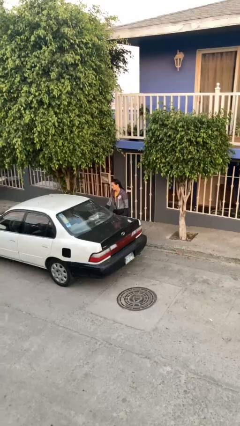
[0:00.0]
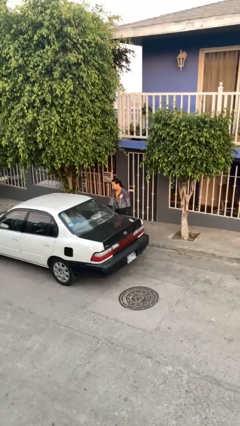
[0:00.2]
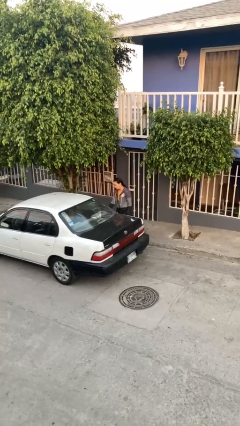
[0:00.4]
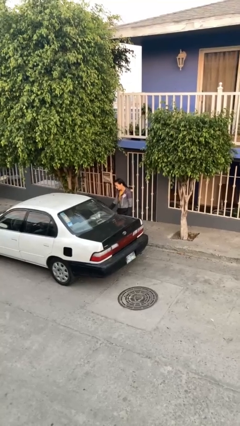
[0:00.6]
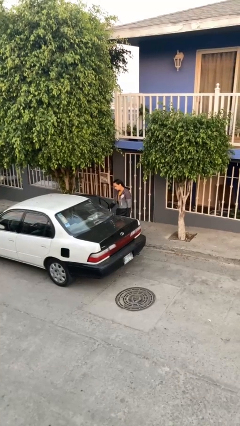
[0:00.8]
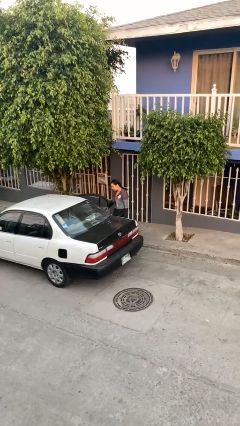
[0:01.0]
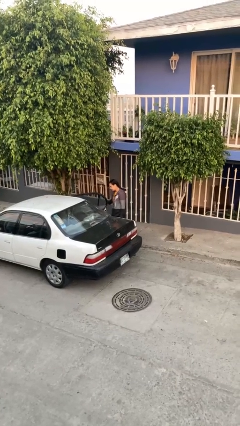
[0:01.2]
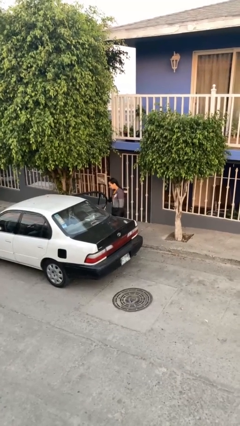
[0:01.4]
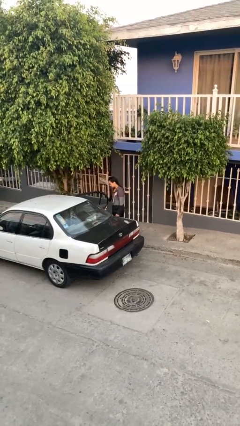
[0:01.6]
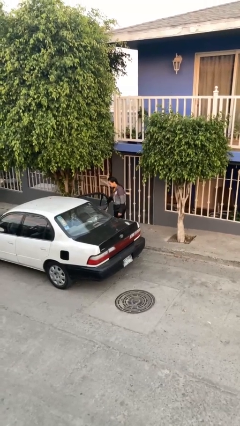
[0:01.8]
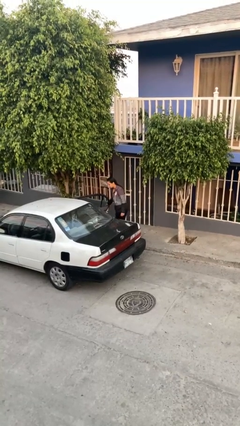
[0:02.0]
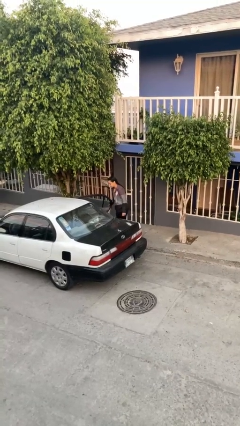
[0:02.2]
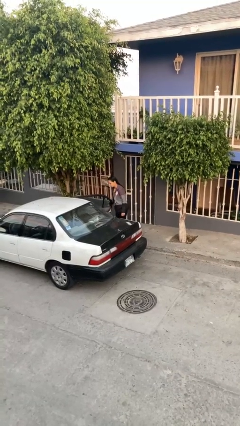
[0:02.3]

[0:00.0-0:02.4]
person opens car door

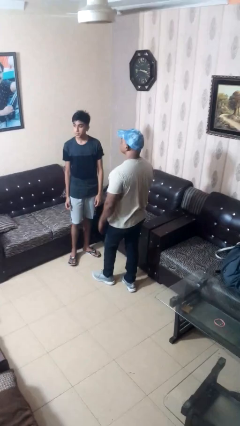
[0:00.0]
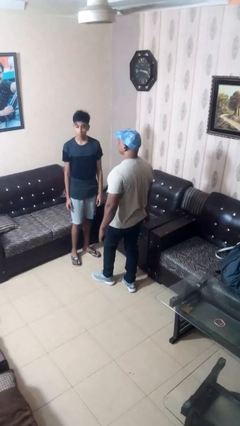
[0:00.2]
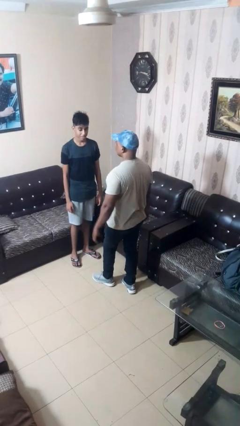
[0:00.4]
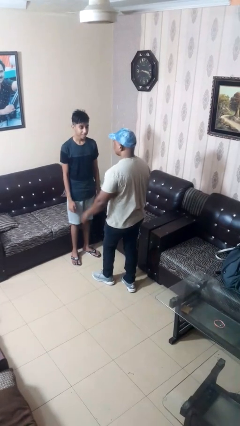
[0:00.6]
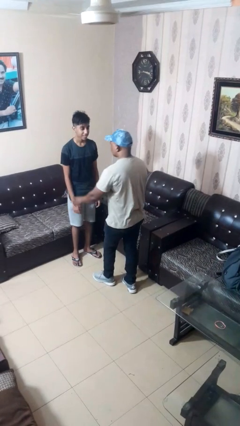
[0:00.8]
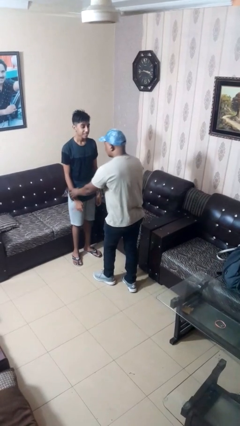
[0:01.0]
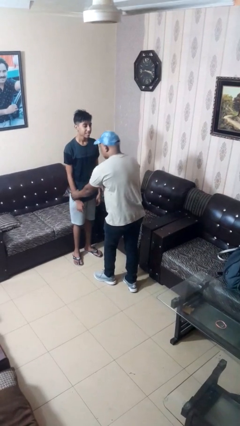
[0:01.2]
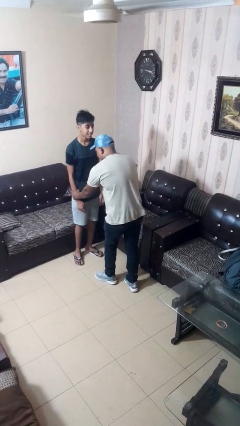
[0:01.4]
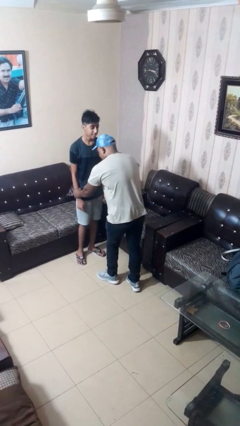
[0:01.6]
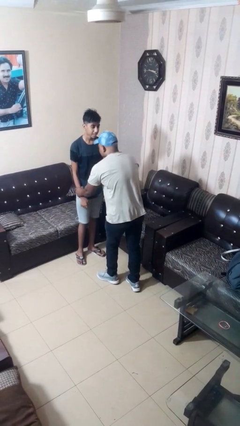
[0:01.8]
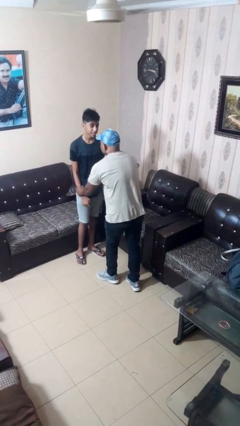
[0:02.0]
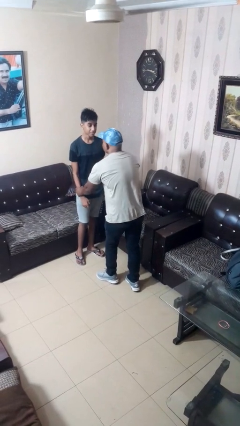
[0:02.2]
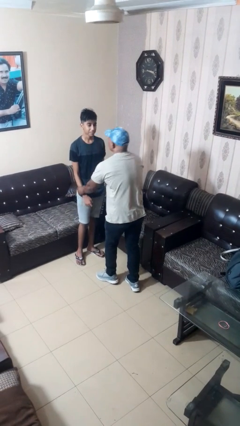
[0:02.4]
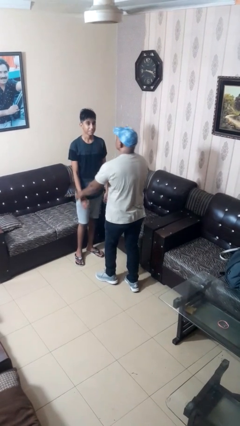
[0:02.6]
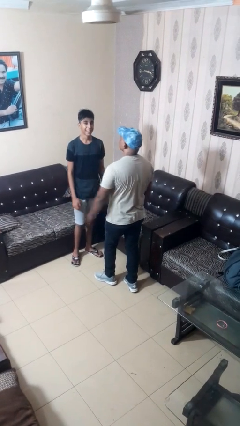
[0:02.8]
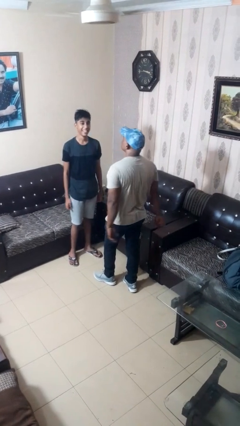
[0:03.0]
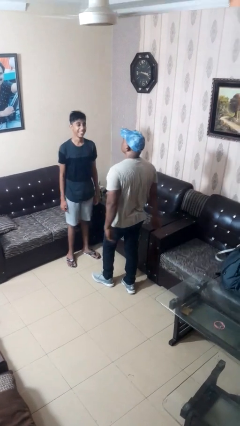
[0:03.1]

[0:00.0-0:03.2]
person grabs person by forearm

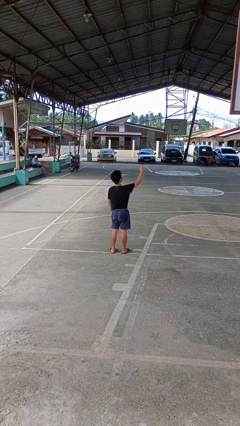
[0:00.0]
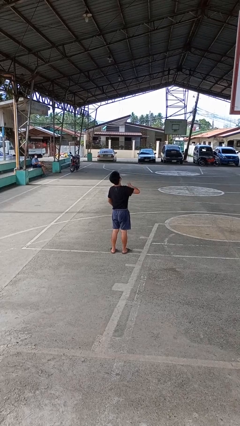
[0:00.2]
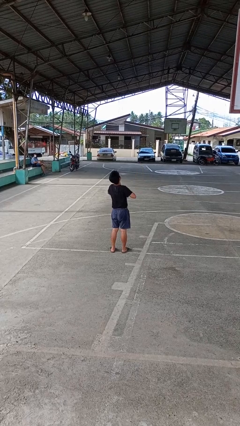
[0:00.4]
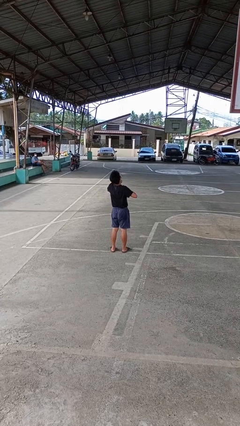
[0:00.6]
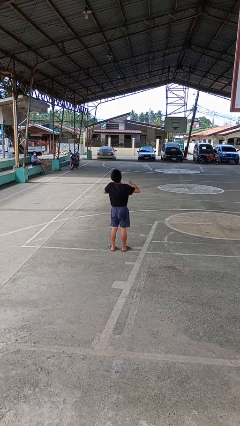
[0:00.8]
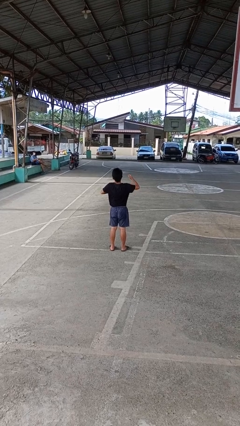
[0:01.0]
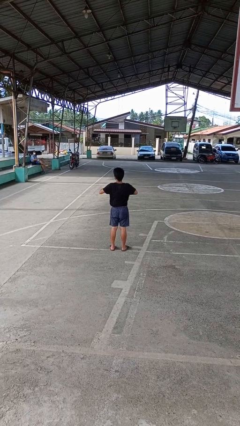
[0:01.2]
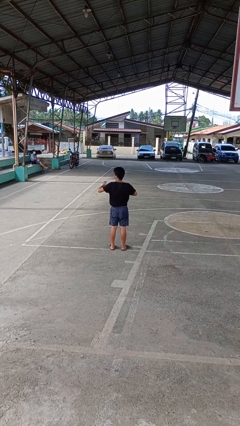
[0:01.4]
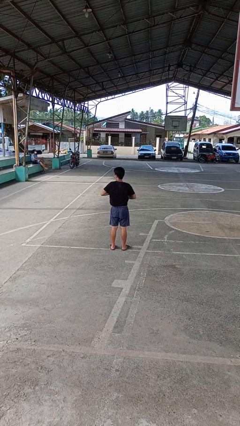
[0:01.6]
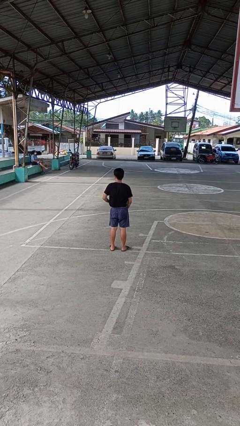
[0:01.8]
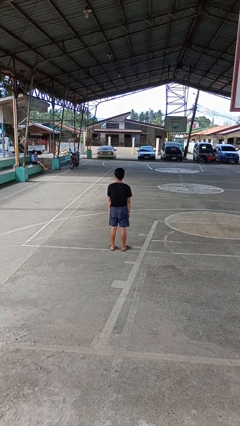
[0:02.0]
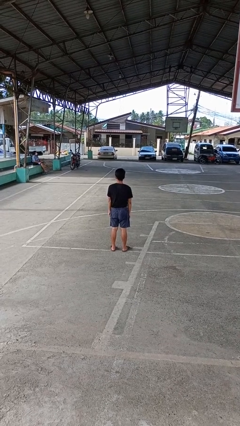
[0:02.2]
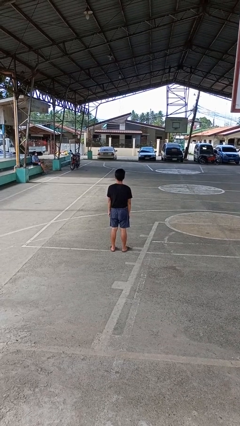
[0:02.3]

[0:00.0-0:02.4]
person drums on chest

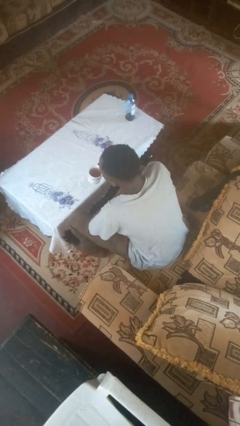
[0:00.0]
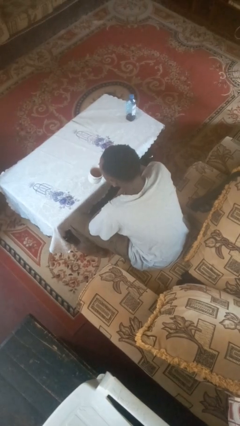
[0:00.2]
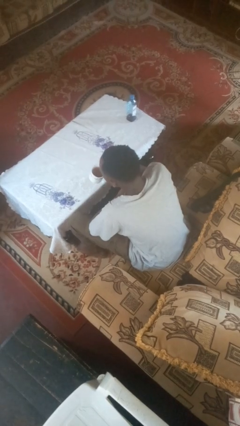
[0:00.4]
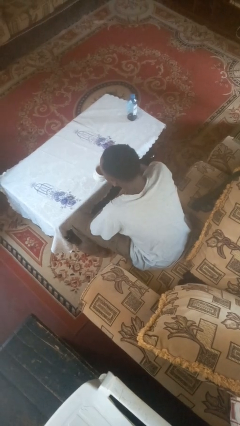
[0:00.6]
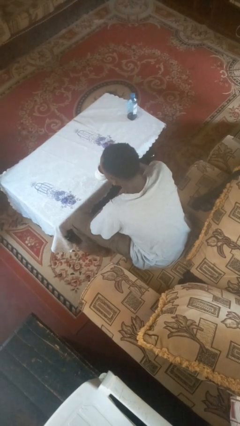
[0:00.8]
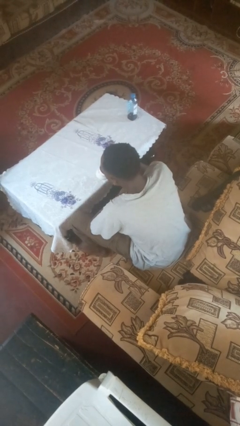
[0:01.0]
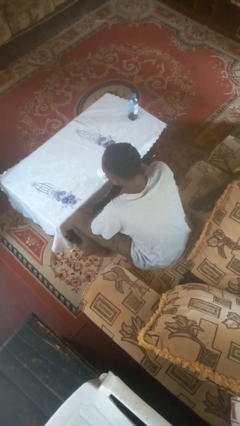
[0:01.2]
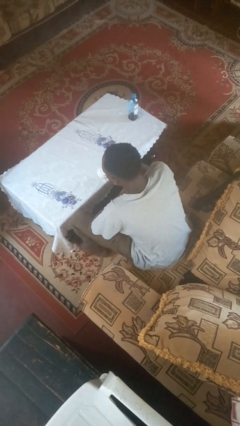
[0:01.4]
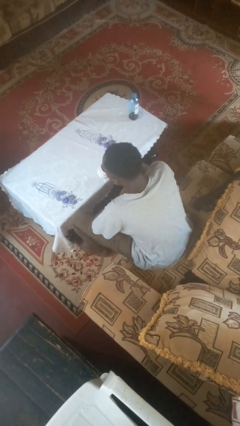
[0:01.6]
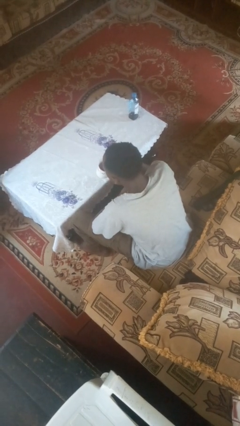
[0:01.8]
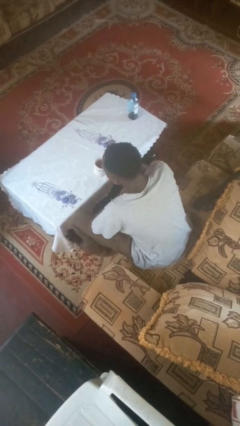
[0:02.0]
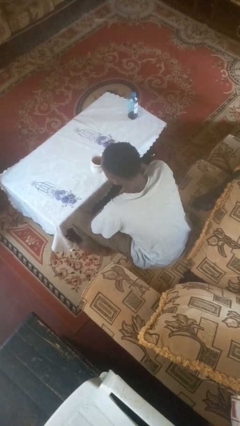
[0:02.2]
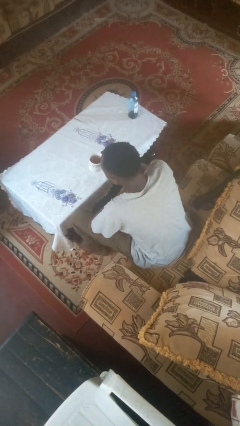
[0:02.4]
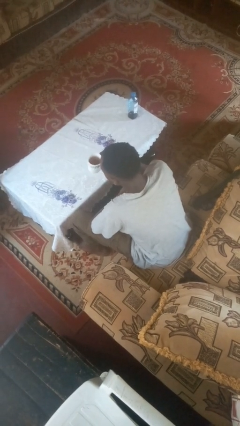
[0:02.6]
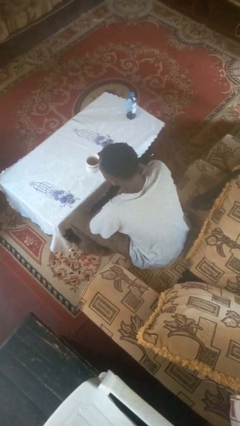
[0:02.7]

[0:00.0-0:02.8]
person drinks from mug

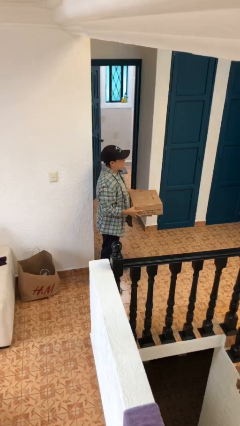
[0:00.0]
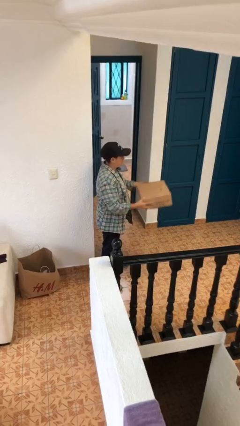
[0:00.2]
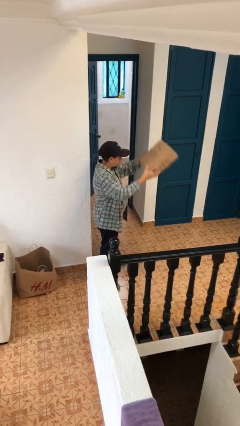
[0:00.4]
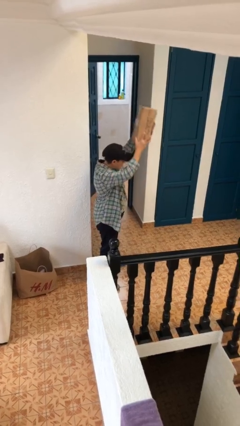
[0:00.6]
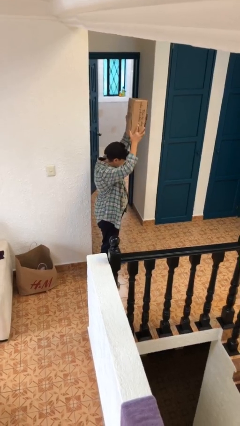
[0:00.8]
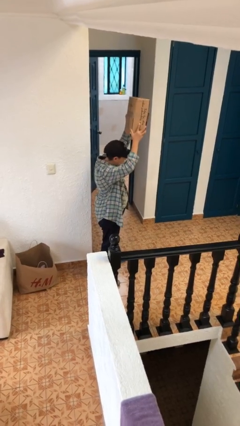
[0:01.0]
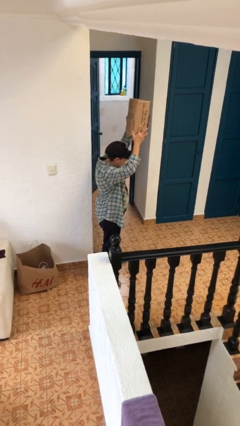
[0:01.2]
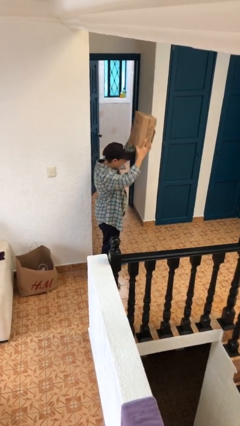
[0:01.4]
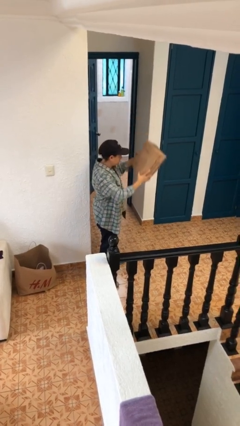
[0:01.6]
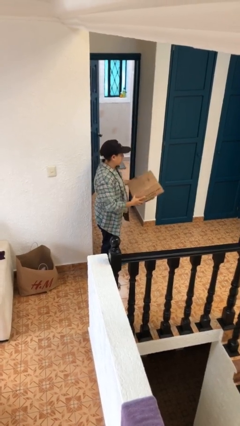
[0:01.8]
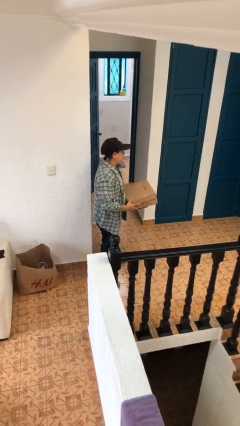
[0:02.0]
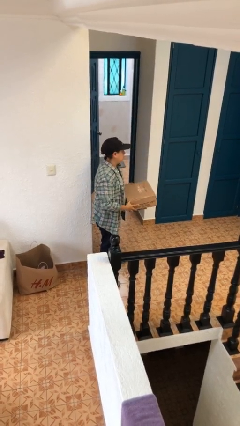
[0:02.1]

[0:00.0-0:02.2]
person holds object above head

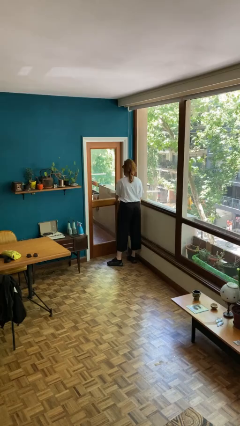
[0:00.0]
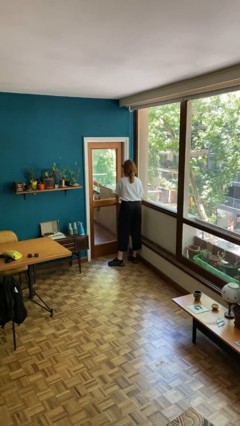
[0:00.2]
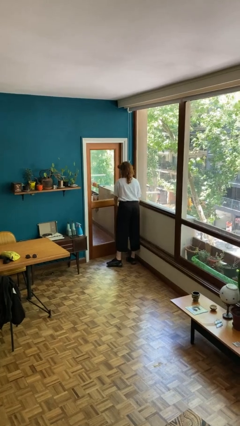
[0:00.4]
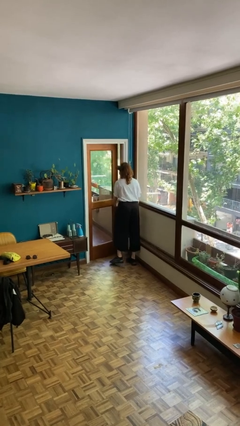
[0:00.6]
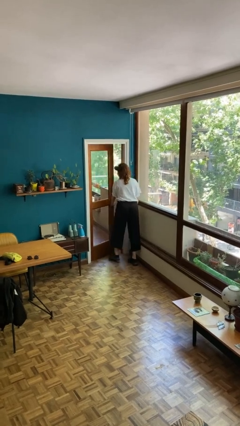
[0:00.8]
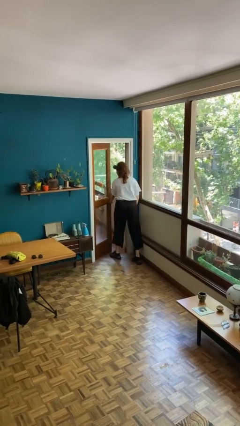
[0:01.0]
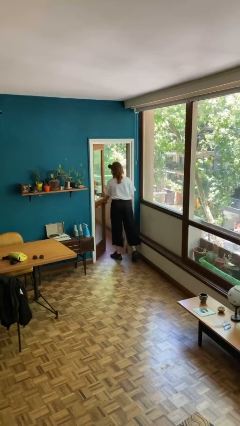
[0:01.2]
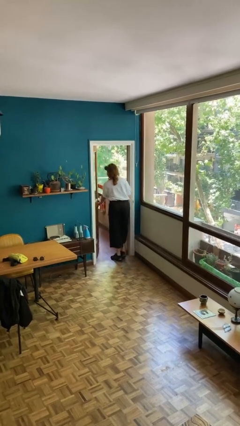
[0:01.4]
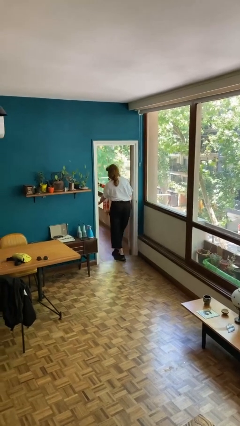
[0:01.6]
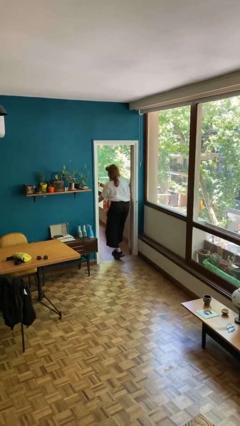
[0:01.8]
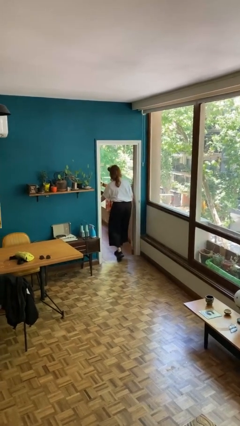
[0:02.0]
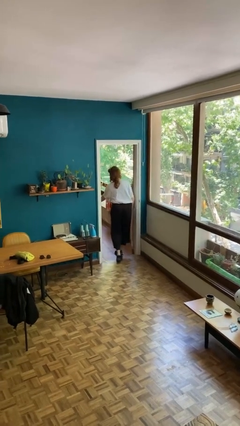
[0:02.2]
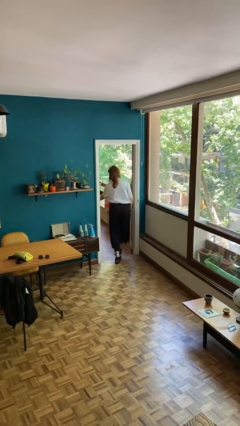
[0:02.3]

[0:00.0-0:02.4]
person opens facility door

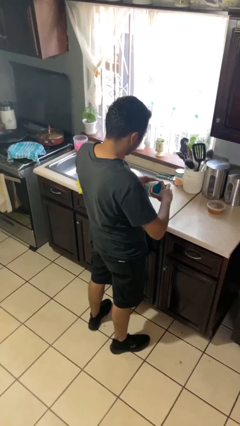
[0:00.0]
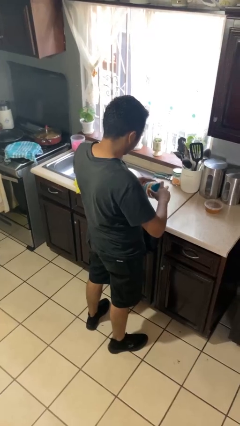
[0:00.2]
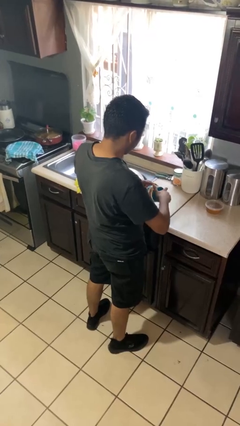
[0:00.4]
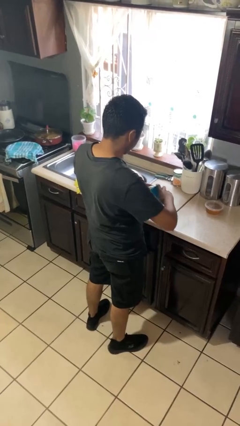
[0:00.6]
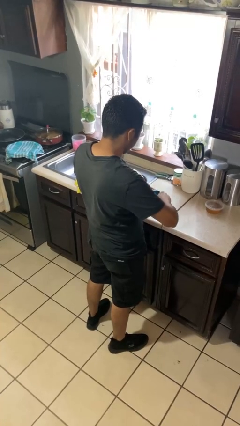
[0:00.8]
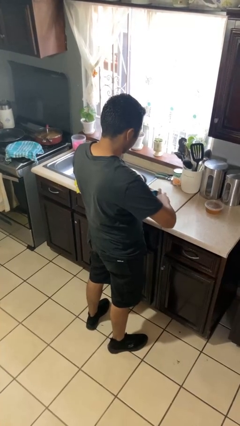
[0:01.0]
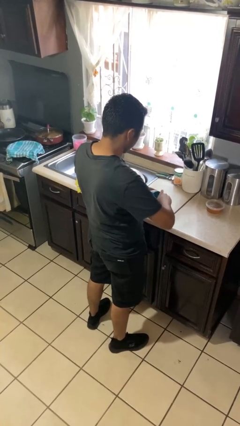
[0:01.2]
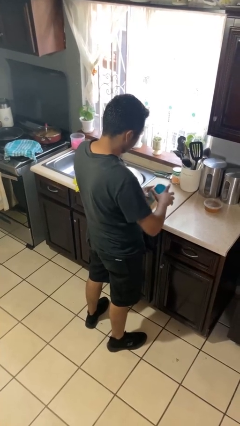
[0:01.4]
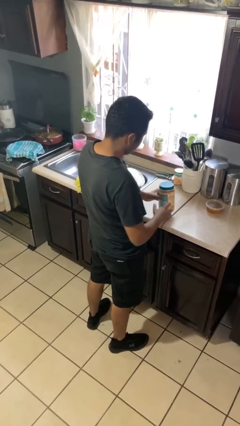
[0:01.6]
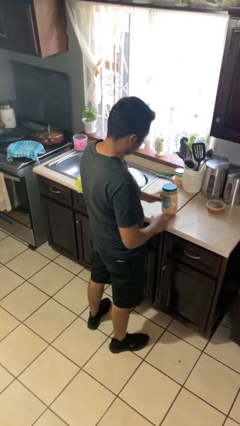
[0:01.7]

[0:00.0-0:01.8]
person closes jar

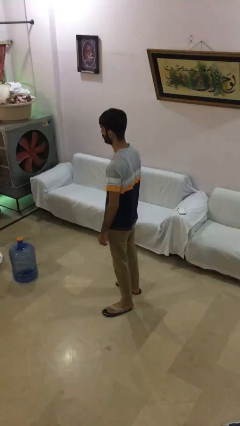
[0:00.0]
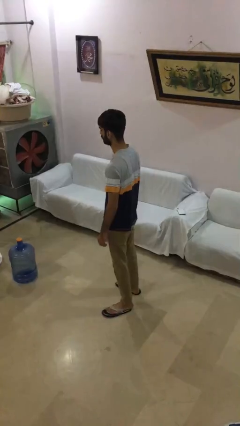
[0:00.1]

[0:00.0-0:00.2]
person steals object from person
